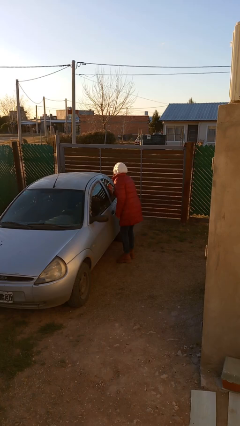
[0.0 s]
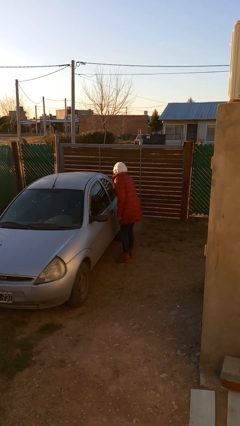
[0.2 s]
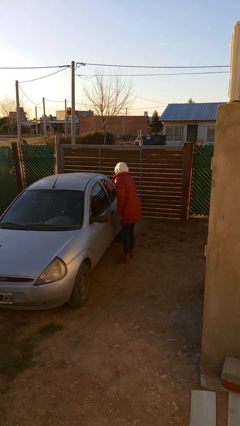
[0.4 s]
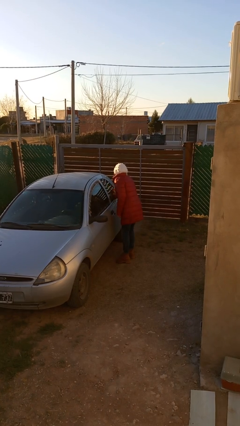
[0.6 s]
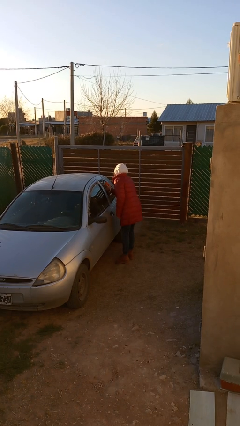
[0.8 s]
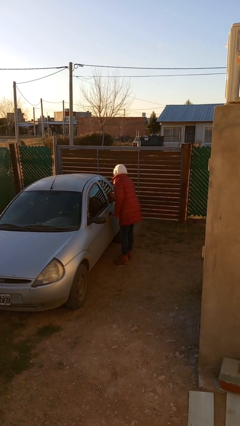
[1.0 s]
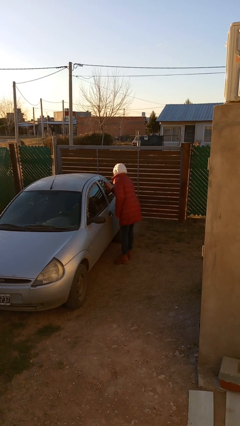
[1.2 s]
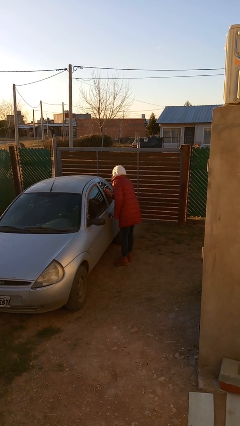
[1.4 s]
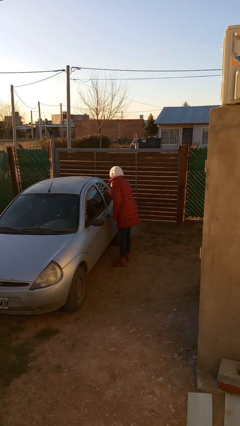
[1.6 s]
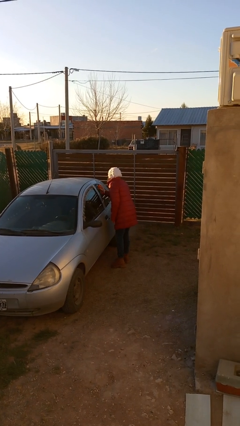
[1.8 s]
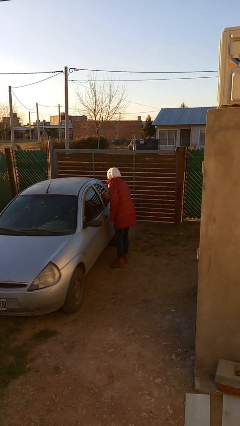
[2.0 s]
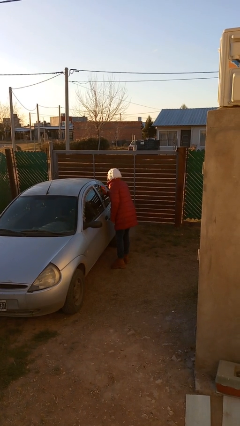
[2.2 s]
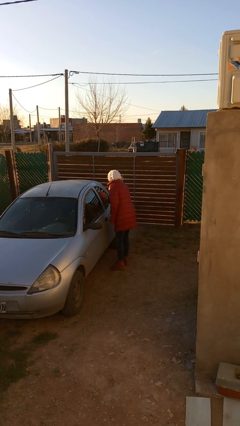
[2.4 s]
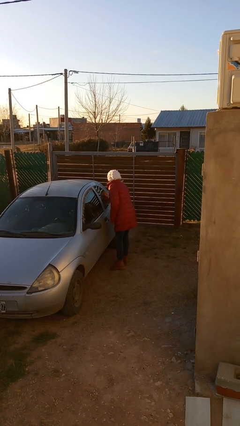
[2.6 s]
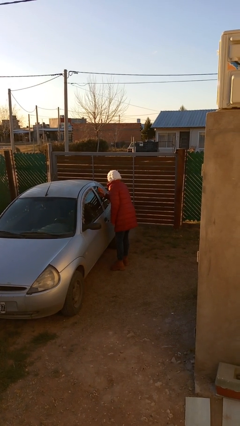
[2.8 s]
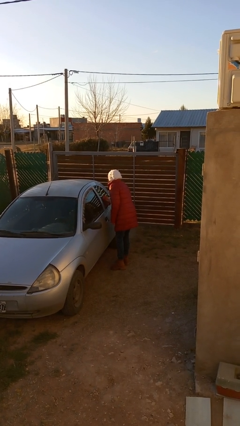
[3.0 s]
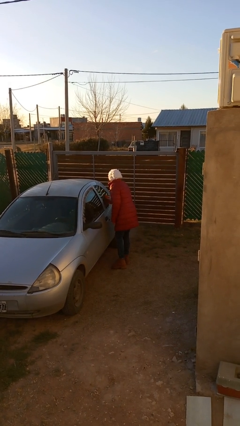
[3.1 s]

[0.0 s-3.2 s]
person polishes car with rag

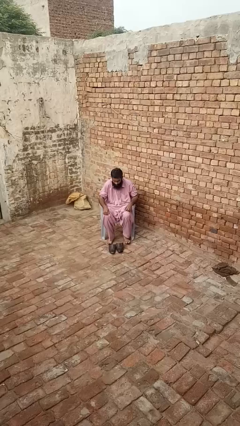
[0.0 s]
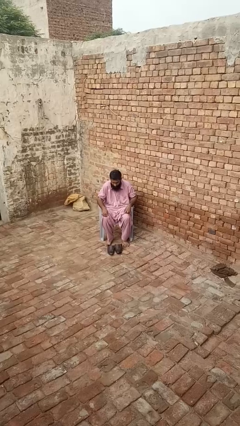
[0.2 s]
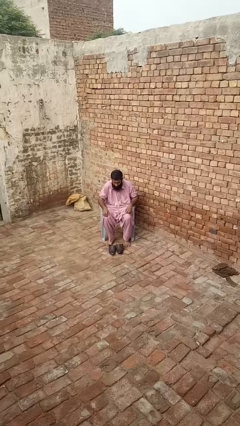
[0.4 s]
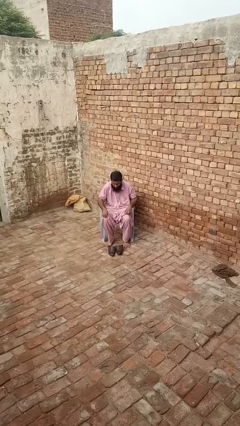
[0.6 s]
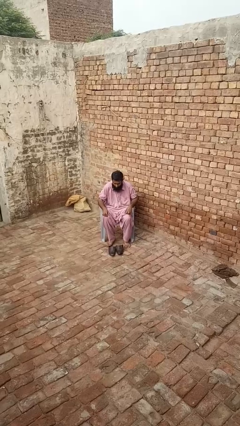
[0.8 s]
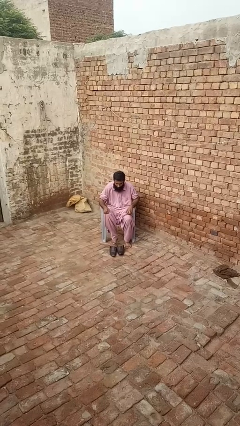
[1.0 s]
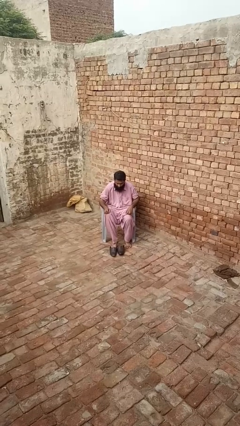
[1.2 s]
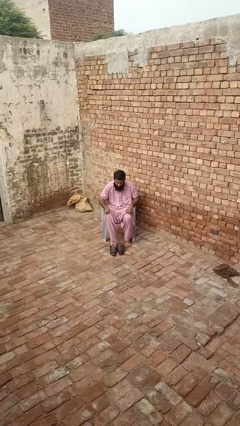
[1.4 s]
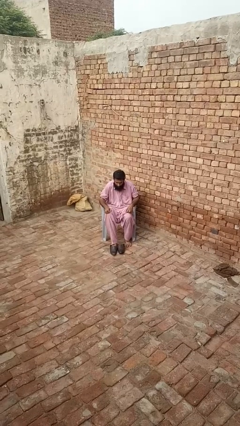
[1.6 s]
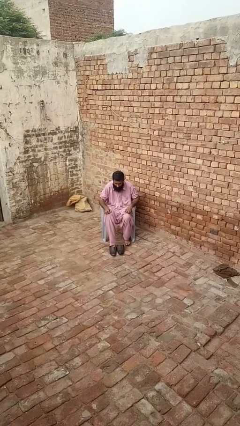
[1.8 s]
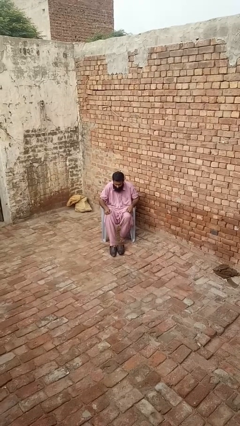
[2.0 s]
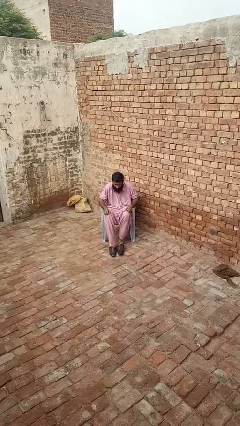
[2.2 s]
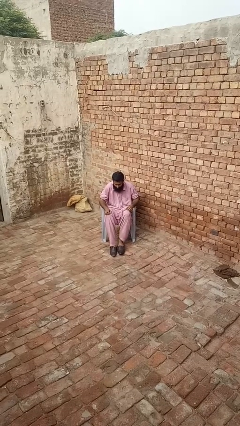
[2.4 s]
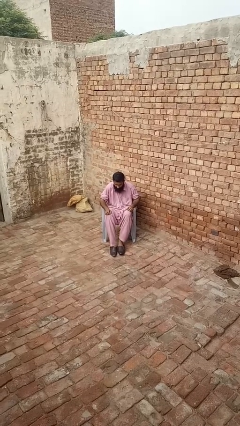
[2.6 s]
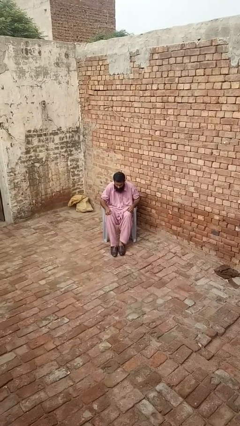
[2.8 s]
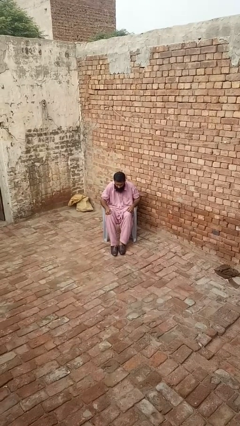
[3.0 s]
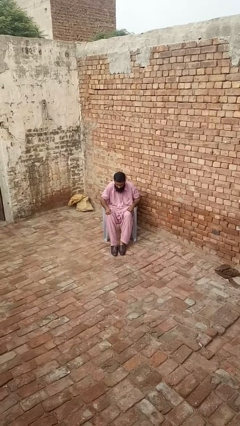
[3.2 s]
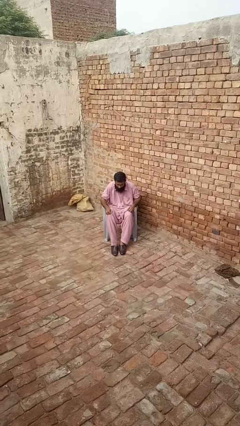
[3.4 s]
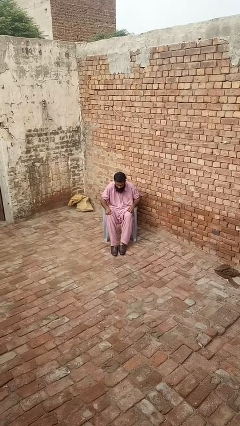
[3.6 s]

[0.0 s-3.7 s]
person puts on shoes

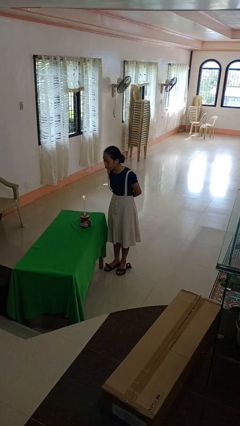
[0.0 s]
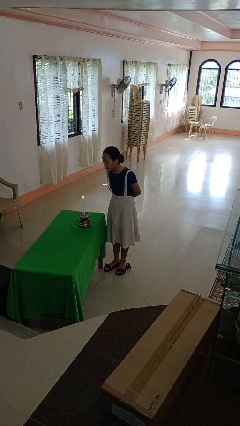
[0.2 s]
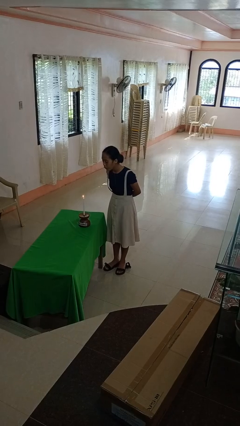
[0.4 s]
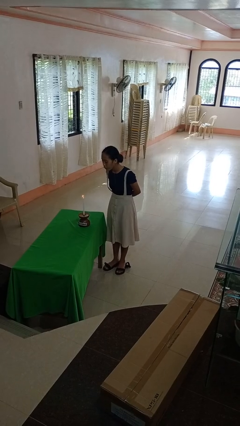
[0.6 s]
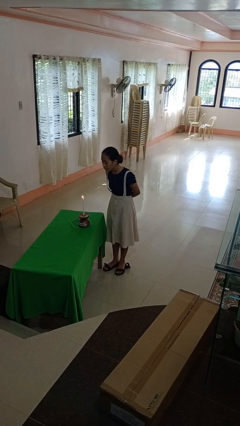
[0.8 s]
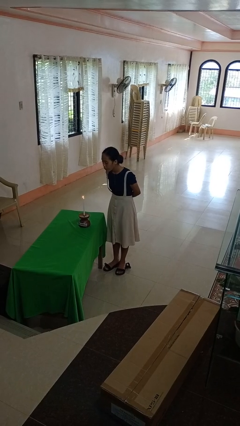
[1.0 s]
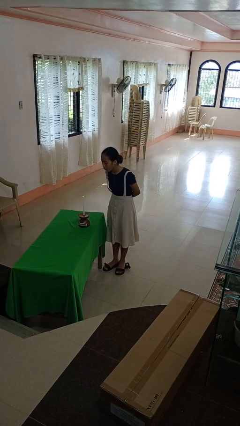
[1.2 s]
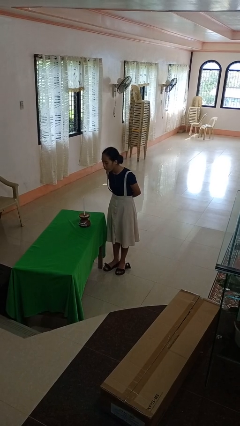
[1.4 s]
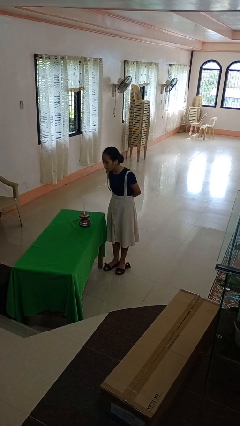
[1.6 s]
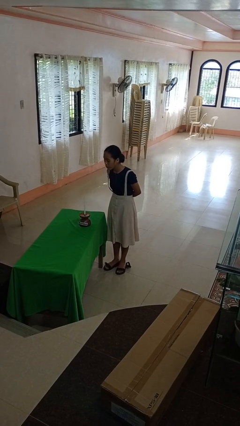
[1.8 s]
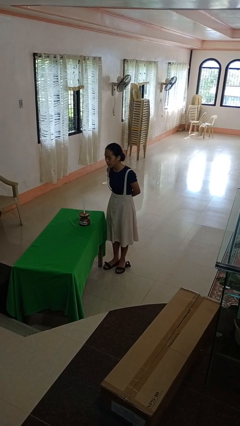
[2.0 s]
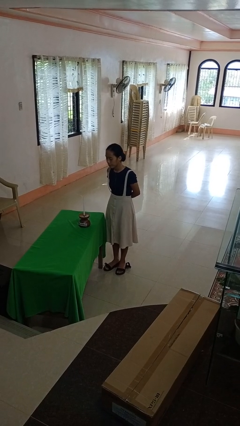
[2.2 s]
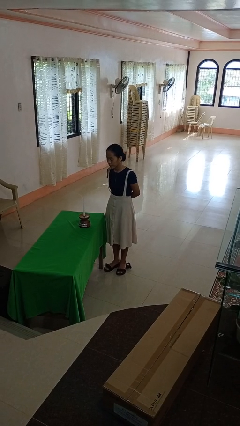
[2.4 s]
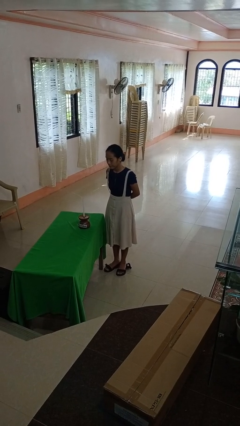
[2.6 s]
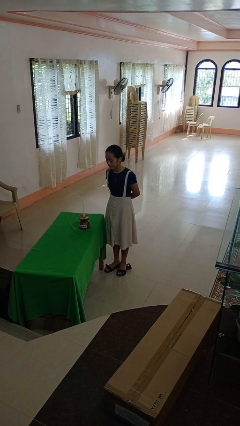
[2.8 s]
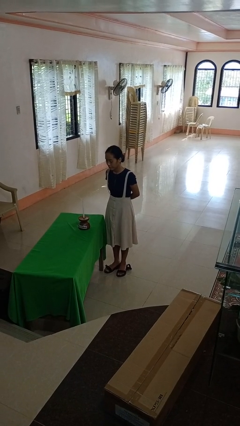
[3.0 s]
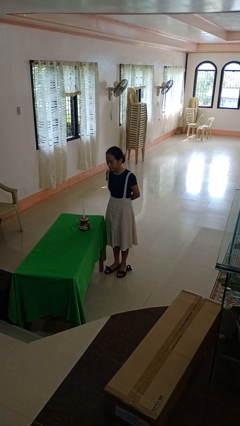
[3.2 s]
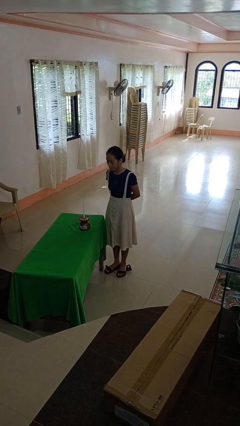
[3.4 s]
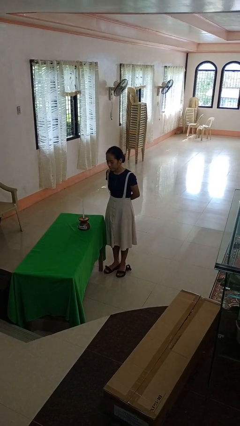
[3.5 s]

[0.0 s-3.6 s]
person extinguishes candle

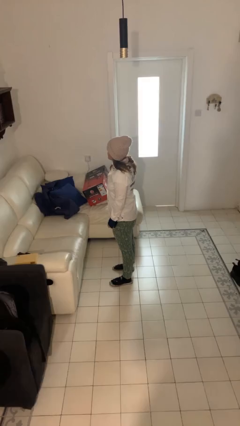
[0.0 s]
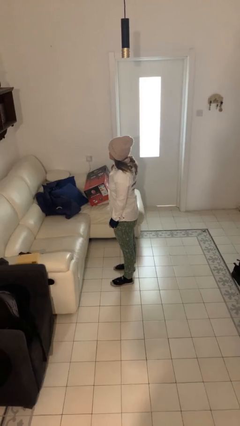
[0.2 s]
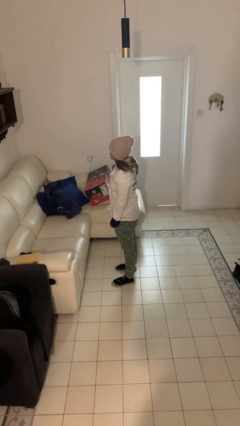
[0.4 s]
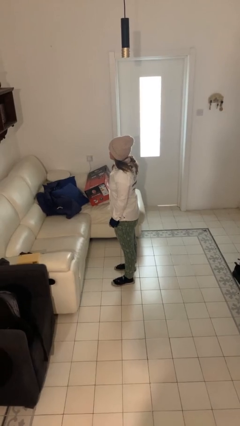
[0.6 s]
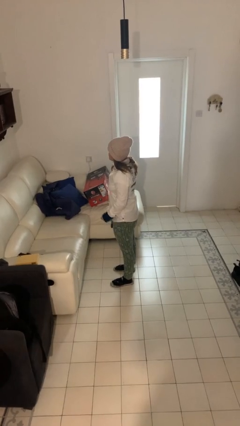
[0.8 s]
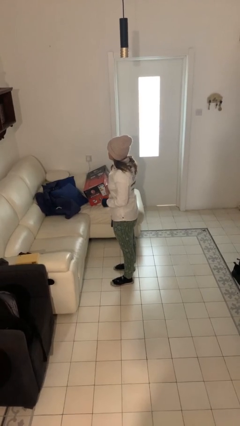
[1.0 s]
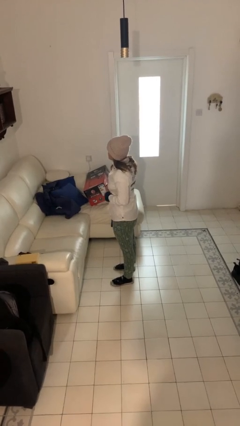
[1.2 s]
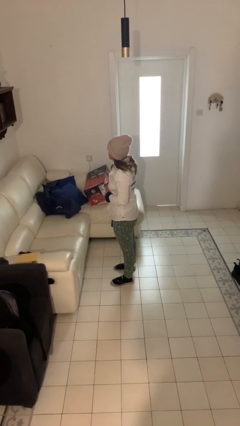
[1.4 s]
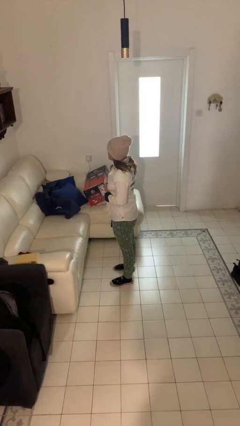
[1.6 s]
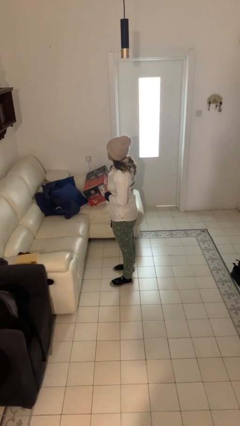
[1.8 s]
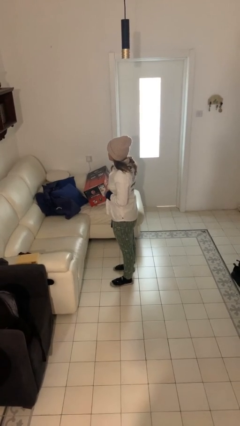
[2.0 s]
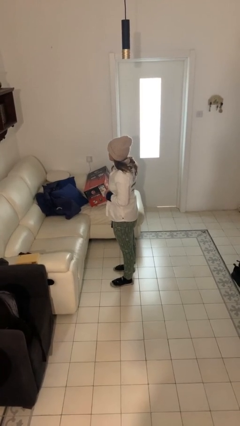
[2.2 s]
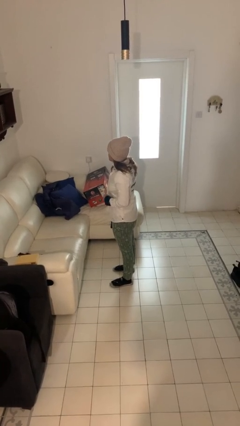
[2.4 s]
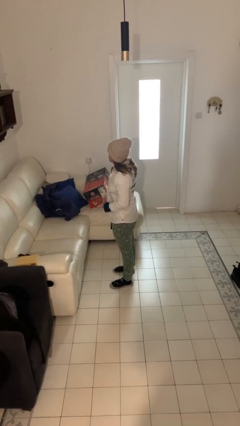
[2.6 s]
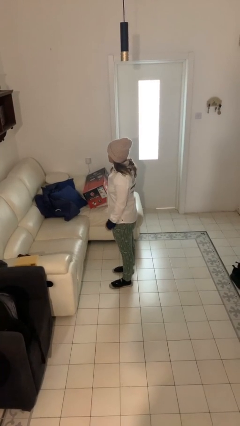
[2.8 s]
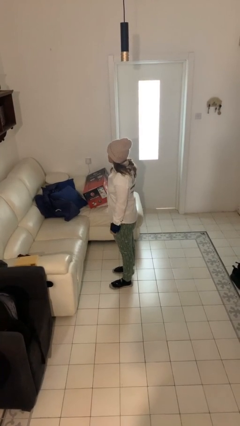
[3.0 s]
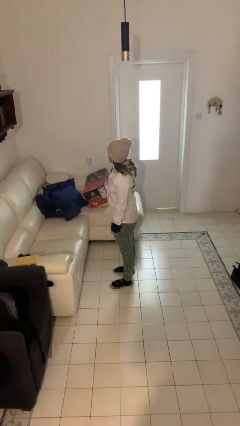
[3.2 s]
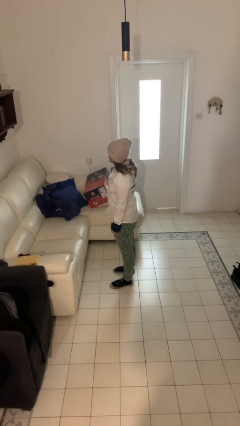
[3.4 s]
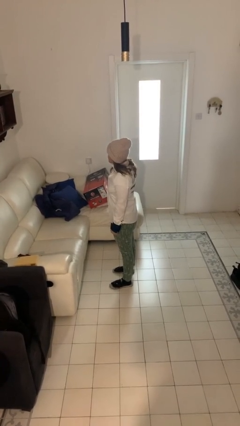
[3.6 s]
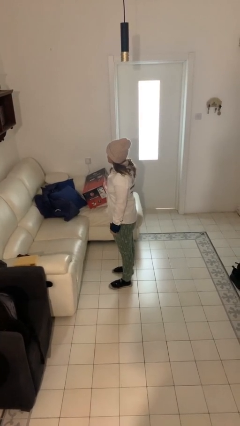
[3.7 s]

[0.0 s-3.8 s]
person unbuttons shirt

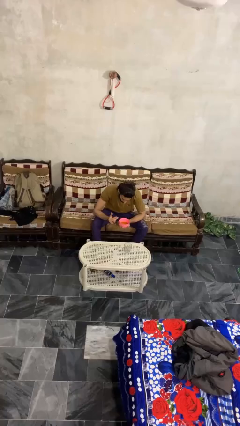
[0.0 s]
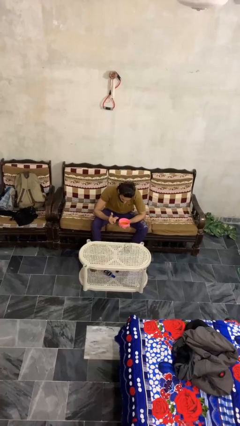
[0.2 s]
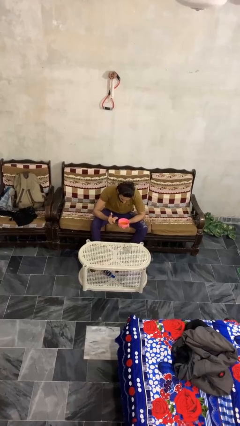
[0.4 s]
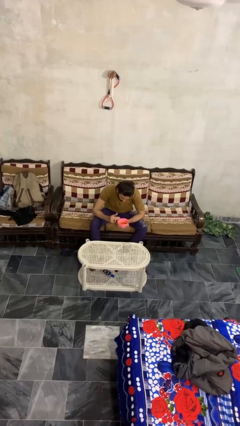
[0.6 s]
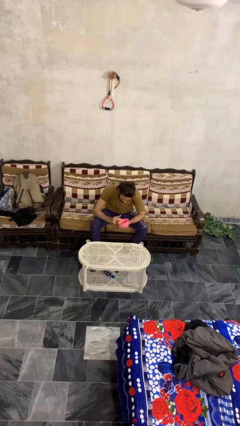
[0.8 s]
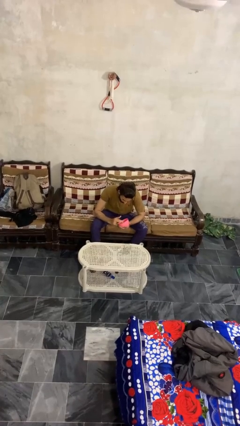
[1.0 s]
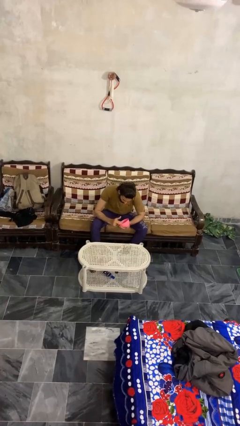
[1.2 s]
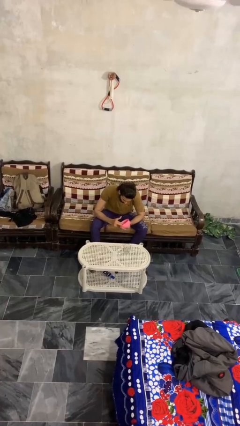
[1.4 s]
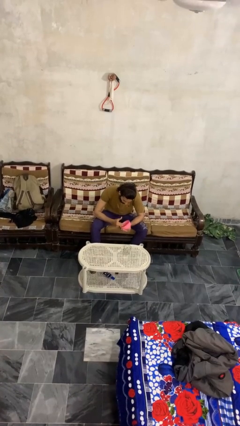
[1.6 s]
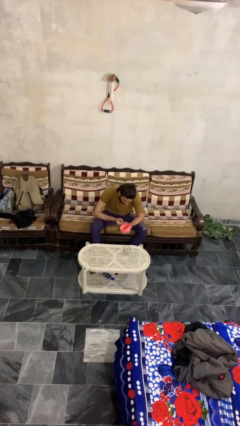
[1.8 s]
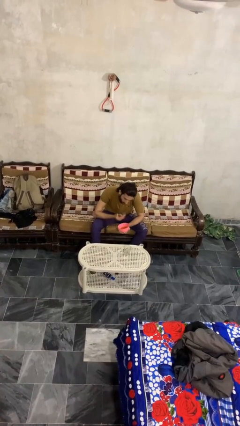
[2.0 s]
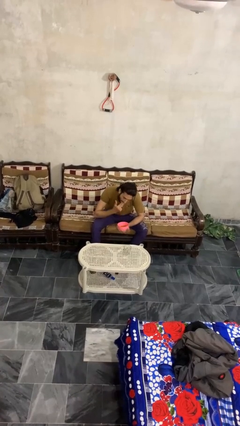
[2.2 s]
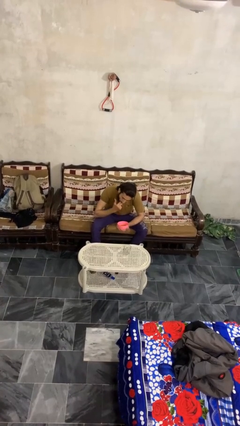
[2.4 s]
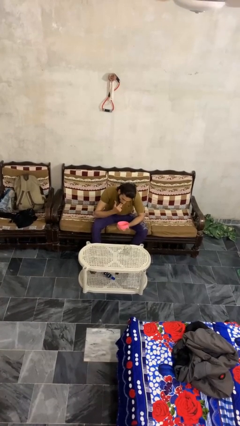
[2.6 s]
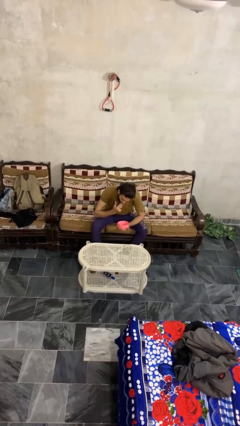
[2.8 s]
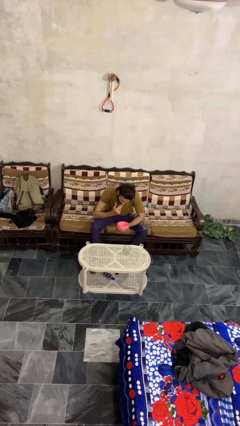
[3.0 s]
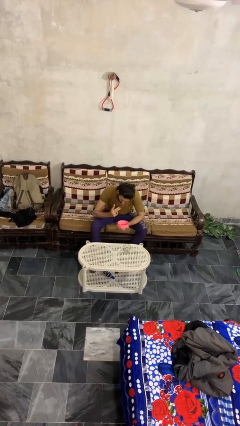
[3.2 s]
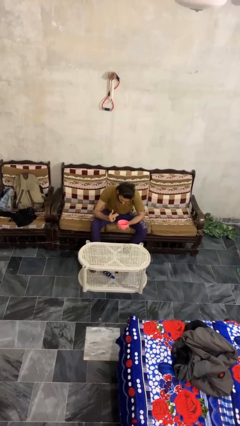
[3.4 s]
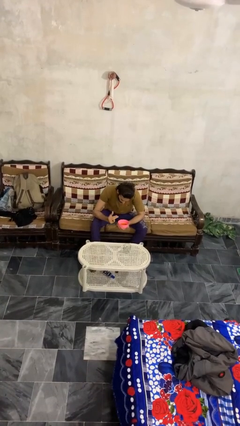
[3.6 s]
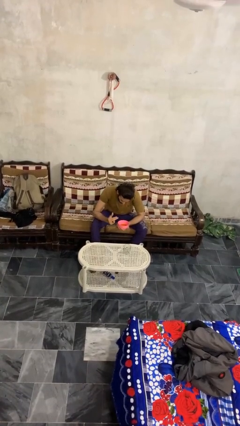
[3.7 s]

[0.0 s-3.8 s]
person eats with hands
